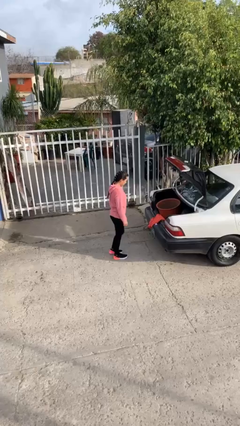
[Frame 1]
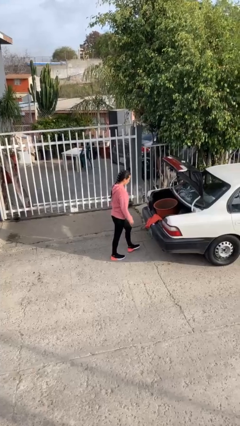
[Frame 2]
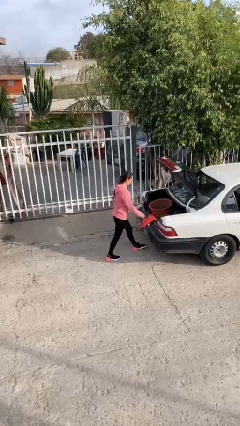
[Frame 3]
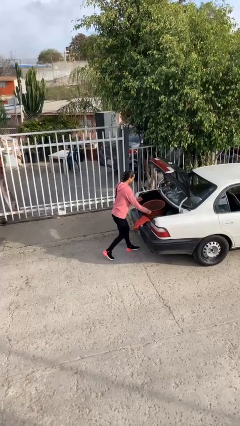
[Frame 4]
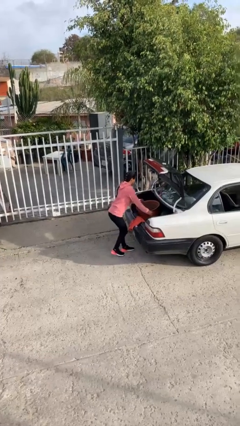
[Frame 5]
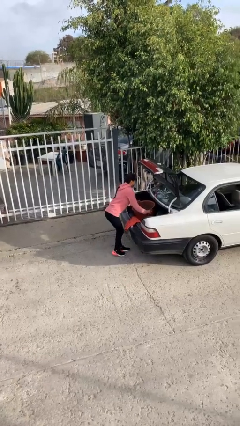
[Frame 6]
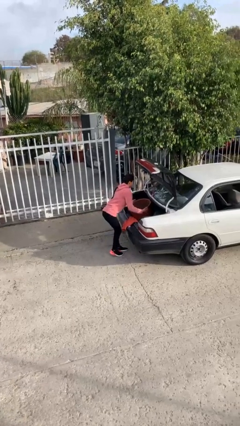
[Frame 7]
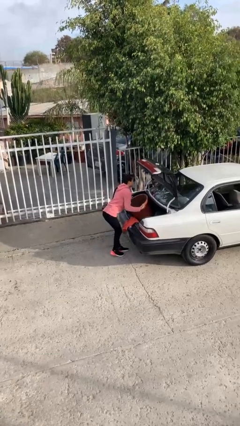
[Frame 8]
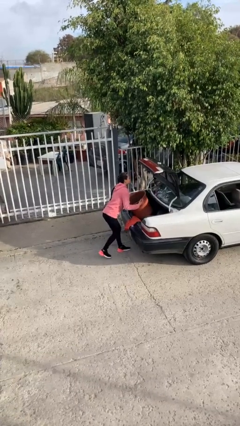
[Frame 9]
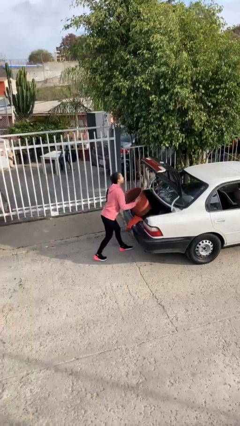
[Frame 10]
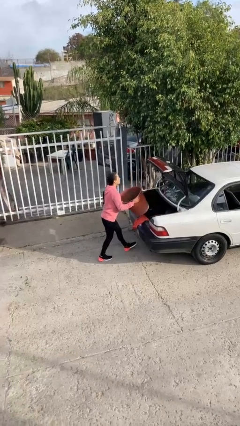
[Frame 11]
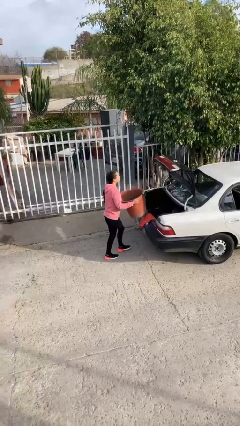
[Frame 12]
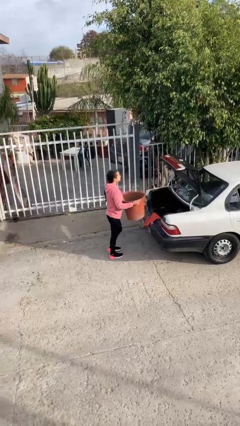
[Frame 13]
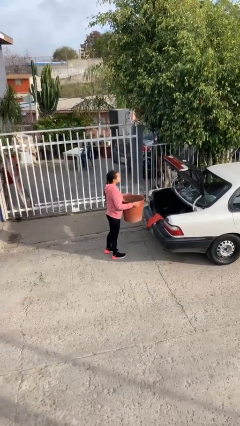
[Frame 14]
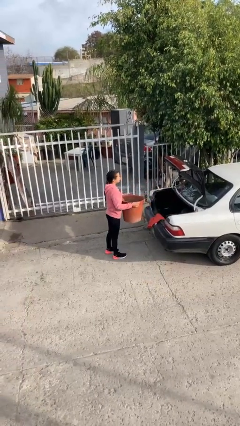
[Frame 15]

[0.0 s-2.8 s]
person unloads car

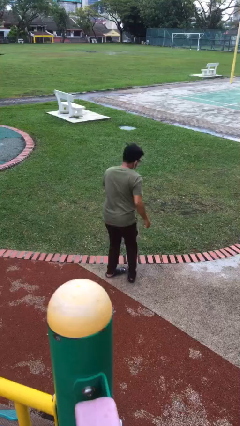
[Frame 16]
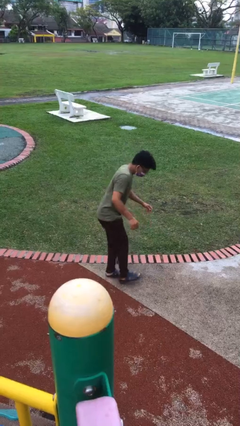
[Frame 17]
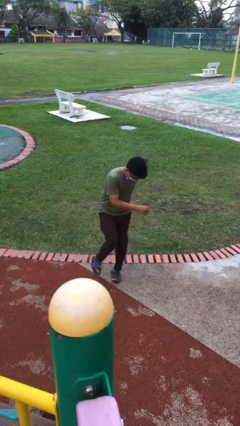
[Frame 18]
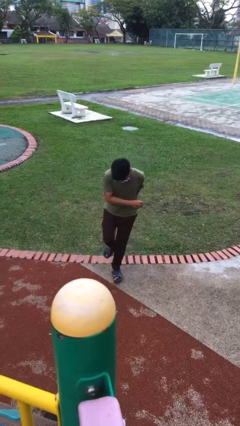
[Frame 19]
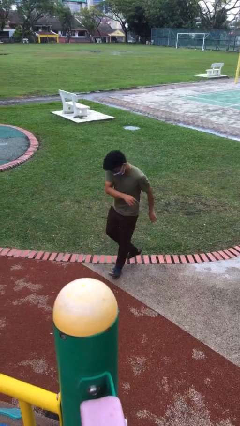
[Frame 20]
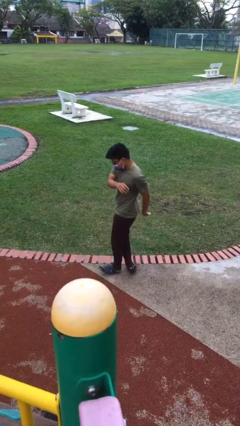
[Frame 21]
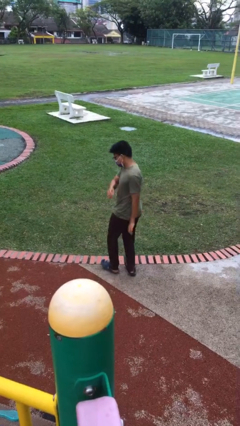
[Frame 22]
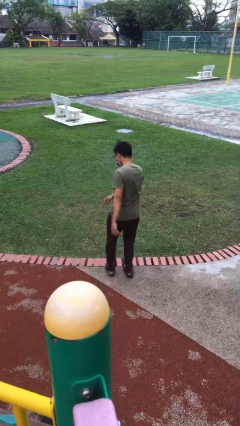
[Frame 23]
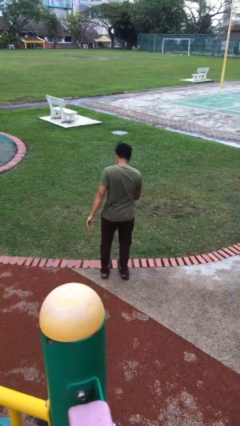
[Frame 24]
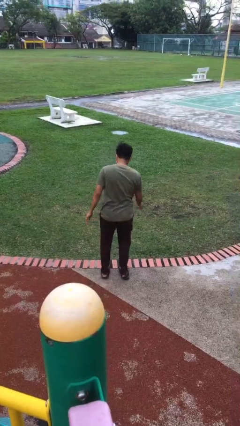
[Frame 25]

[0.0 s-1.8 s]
person twirls

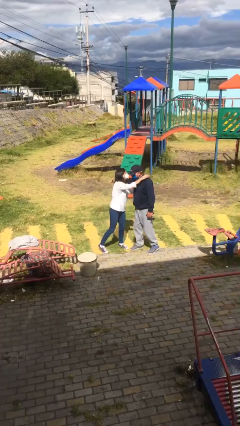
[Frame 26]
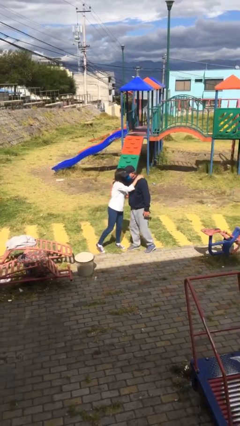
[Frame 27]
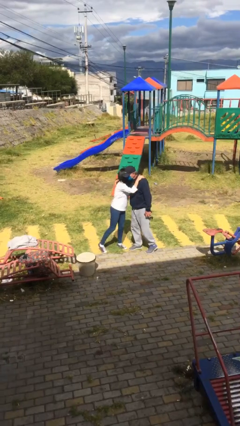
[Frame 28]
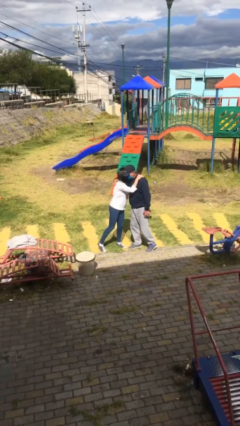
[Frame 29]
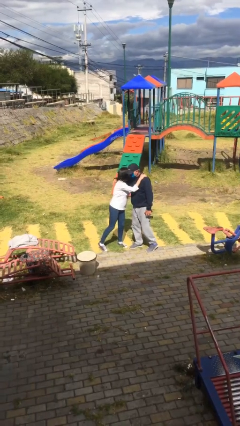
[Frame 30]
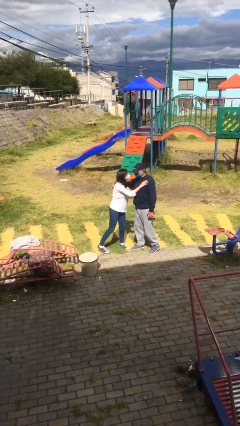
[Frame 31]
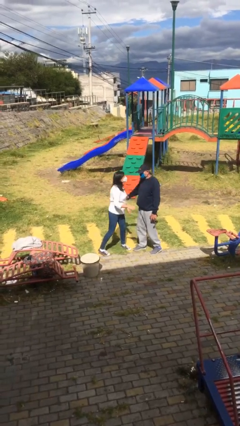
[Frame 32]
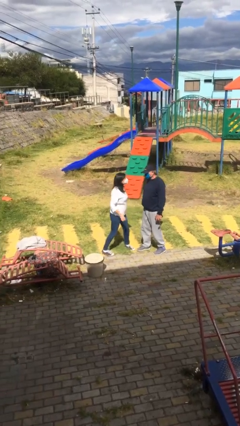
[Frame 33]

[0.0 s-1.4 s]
person embraces person

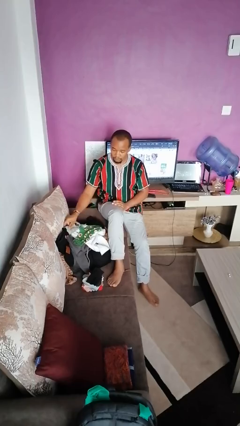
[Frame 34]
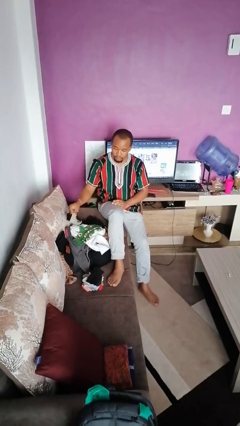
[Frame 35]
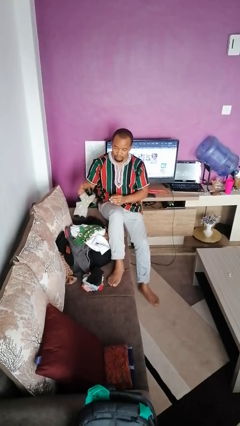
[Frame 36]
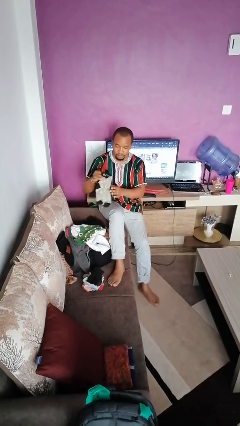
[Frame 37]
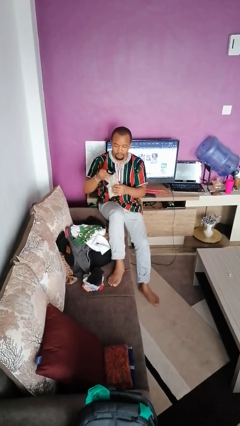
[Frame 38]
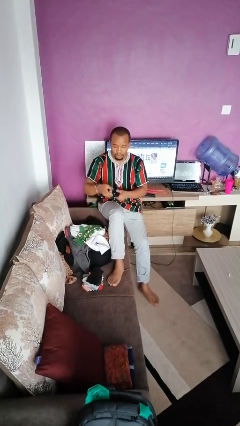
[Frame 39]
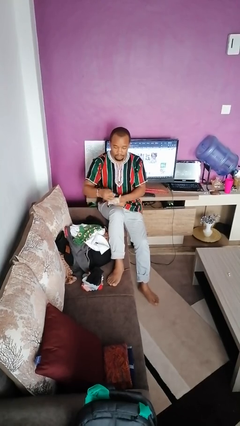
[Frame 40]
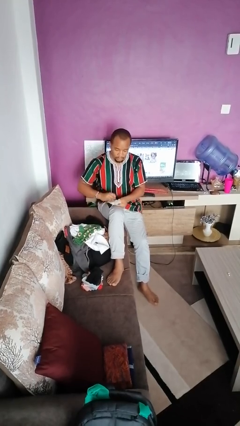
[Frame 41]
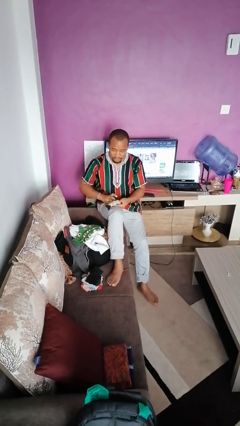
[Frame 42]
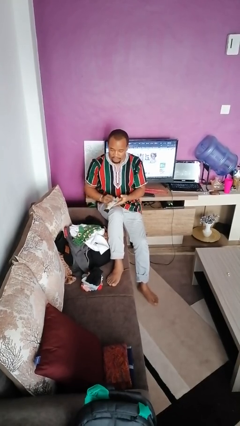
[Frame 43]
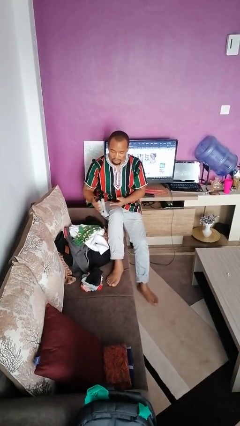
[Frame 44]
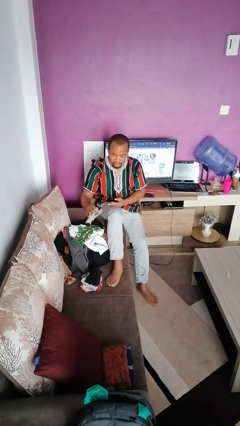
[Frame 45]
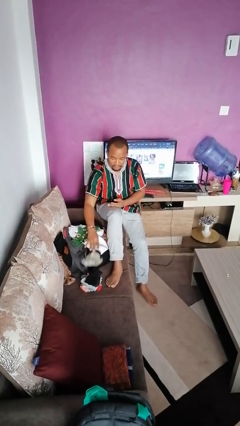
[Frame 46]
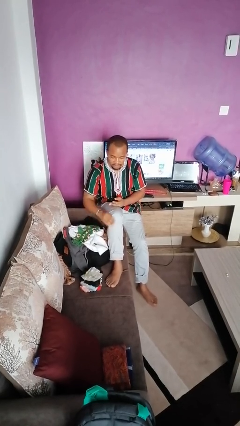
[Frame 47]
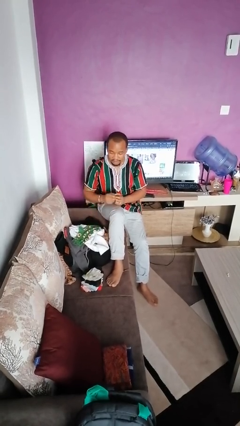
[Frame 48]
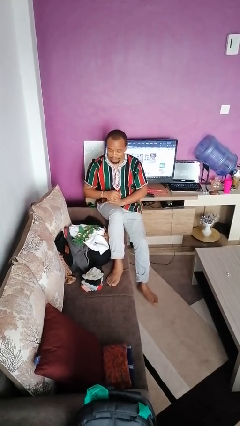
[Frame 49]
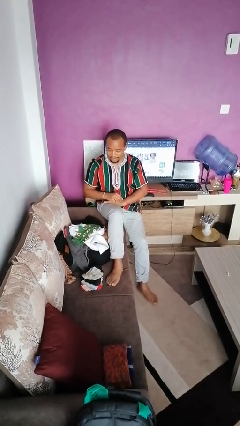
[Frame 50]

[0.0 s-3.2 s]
person folds socks

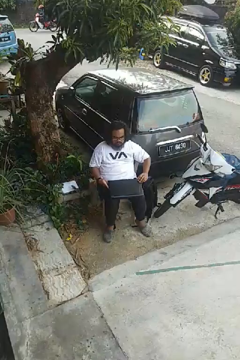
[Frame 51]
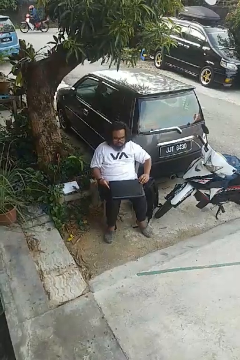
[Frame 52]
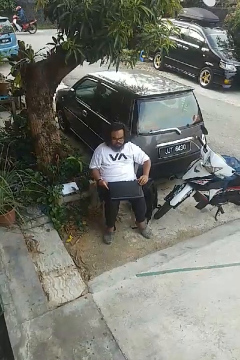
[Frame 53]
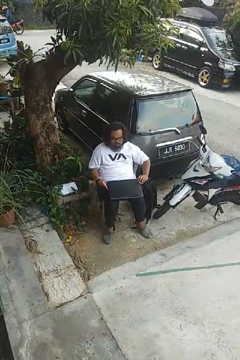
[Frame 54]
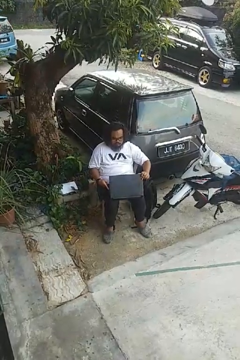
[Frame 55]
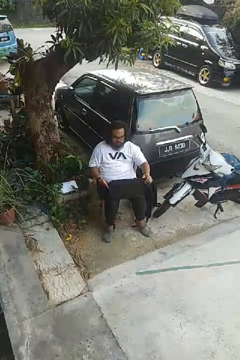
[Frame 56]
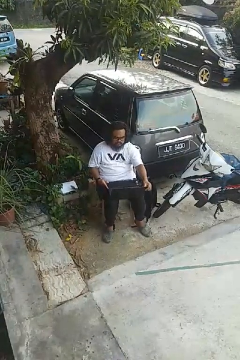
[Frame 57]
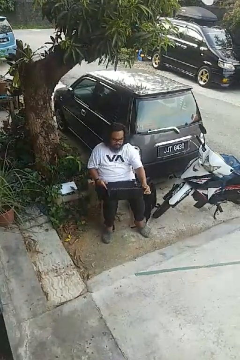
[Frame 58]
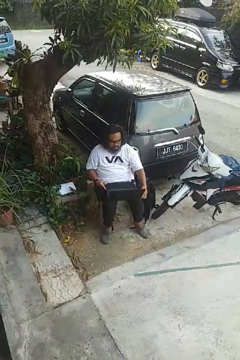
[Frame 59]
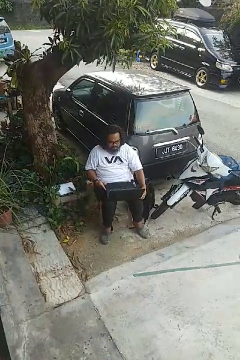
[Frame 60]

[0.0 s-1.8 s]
person opens laptop

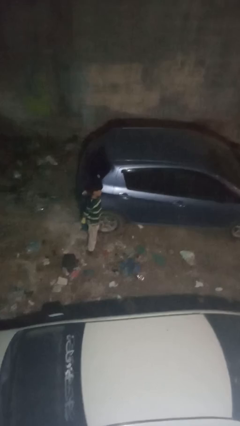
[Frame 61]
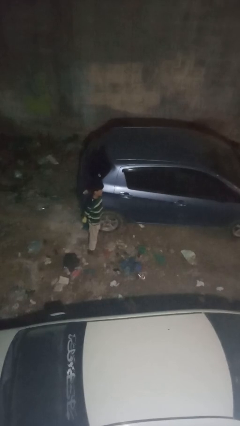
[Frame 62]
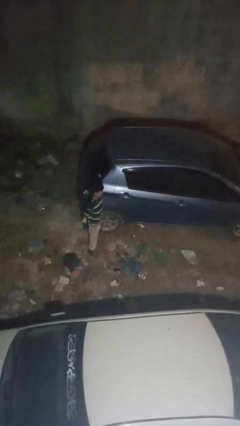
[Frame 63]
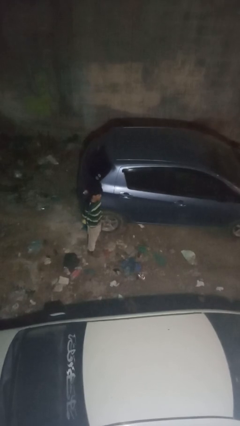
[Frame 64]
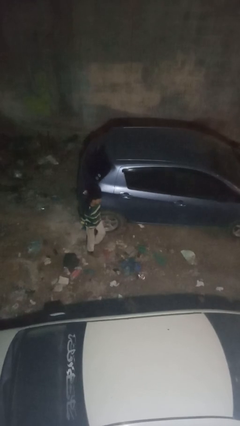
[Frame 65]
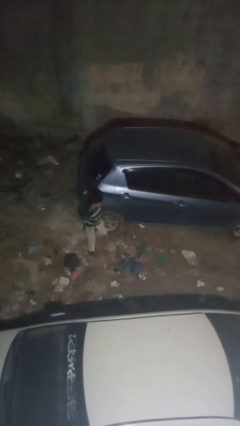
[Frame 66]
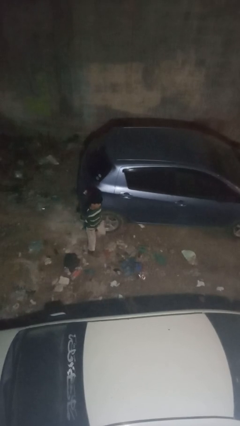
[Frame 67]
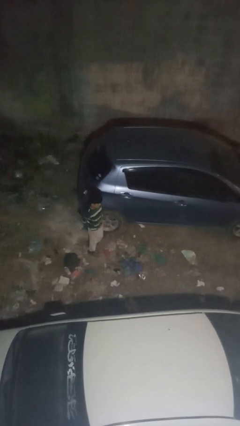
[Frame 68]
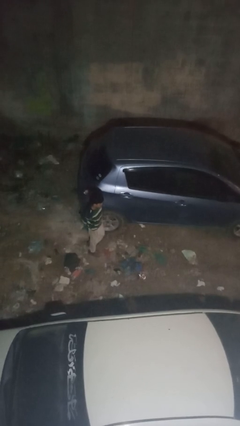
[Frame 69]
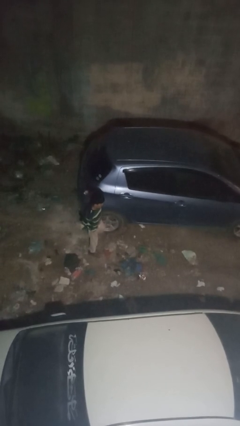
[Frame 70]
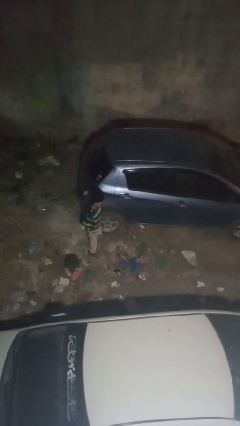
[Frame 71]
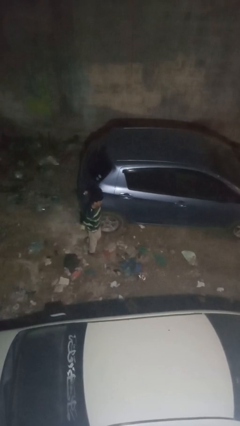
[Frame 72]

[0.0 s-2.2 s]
person kicks car tires

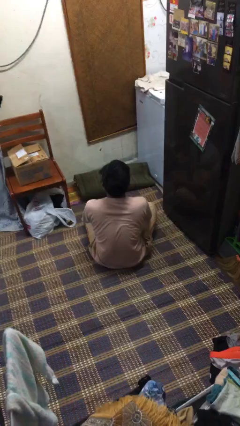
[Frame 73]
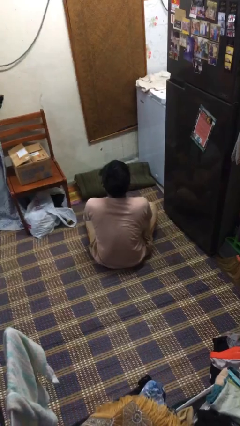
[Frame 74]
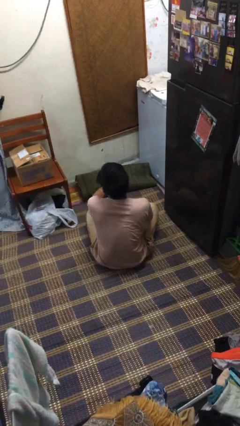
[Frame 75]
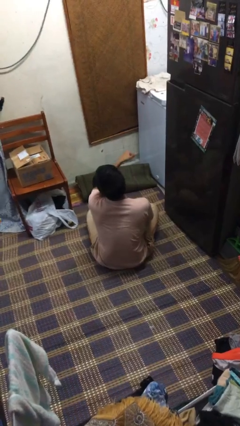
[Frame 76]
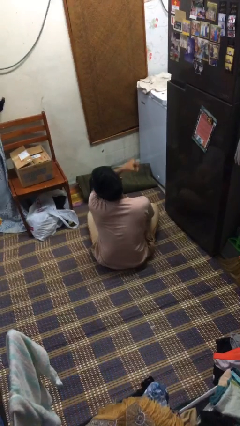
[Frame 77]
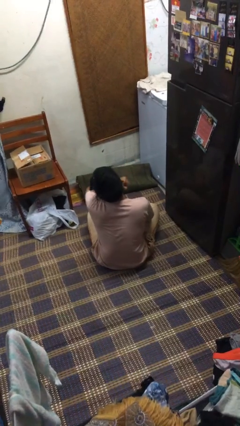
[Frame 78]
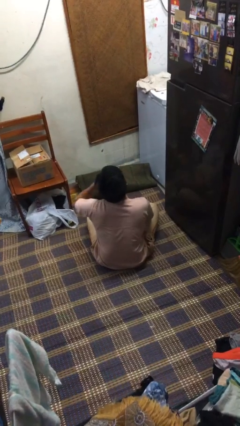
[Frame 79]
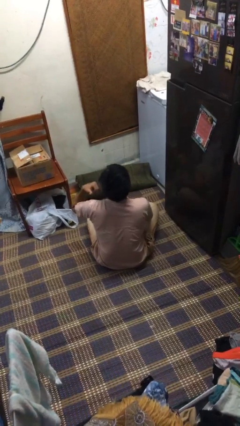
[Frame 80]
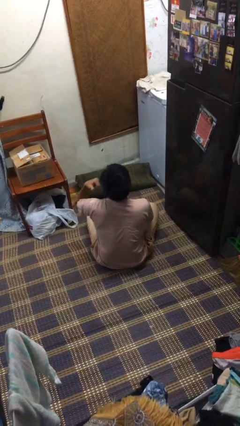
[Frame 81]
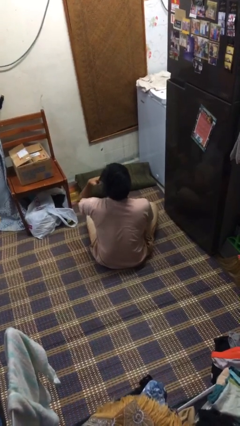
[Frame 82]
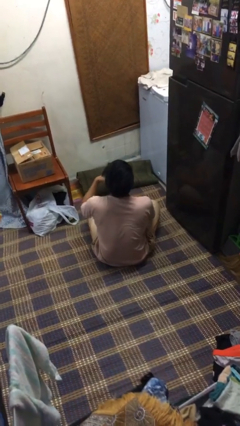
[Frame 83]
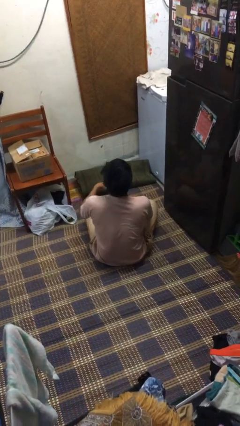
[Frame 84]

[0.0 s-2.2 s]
person gestures cut

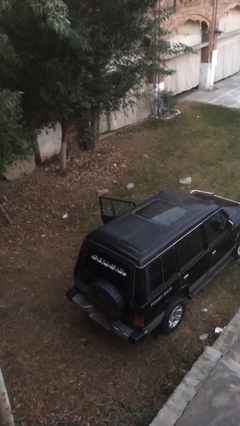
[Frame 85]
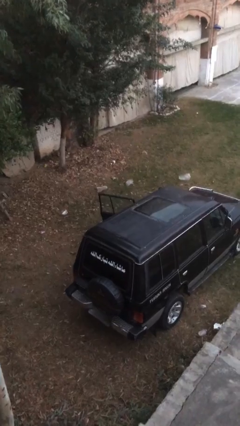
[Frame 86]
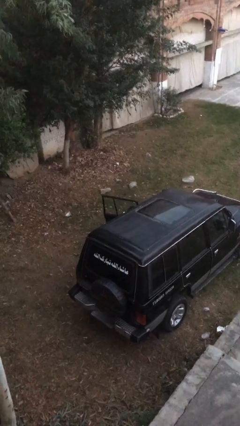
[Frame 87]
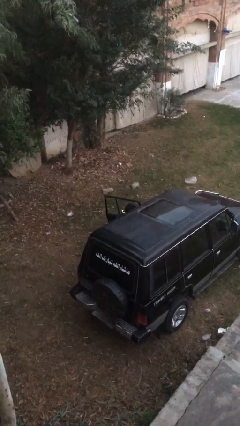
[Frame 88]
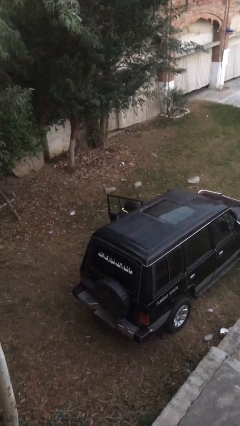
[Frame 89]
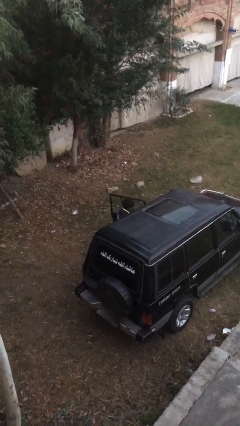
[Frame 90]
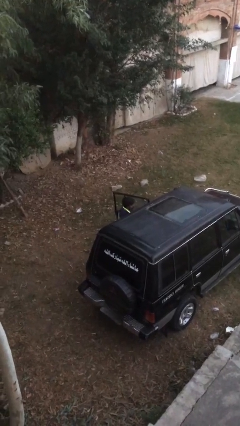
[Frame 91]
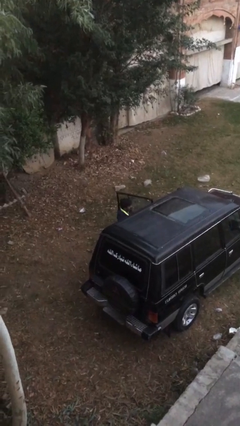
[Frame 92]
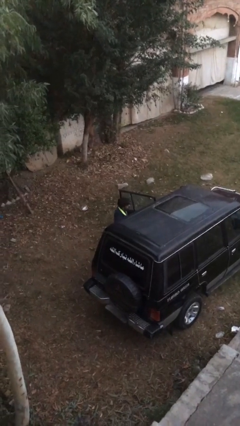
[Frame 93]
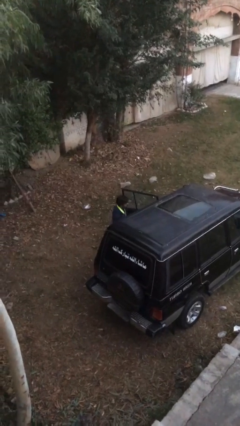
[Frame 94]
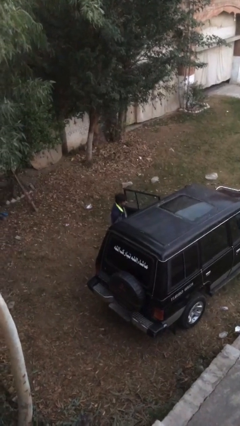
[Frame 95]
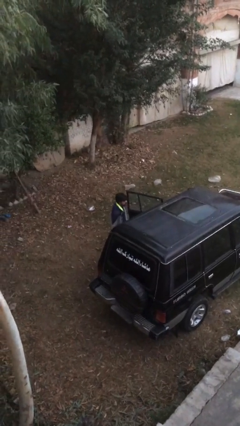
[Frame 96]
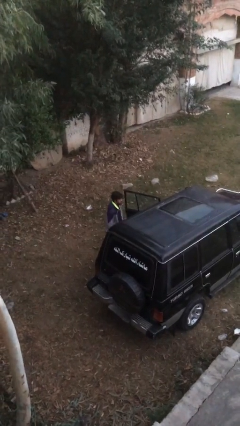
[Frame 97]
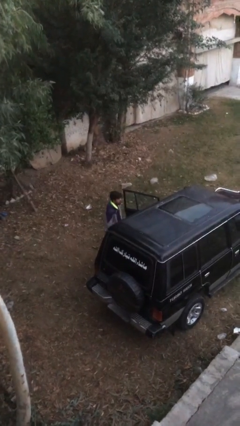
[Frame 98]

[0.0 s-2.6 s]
person exits car
